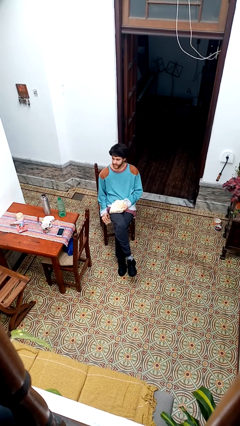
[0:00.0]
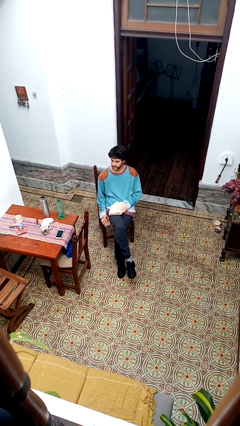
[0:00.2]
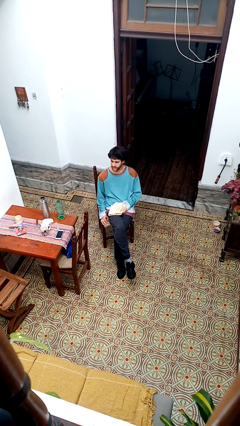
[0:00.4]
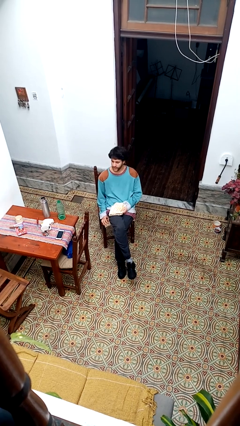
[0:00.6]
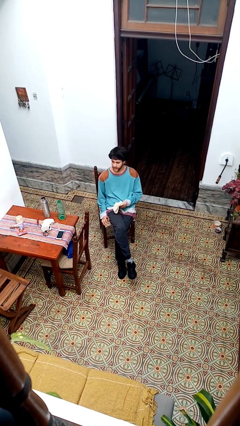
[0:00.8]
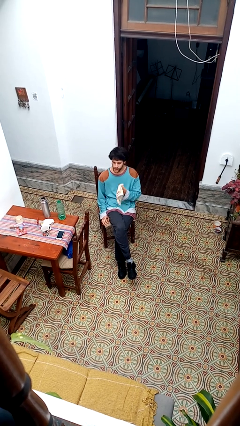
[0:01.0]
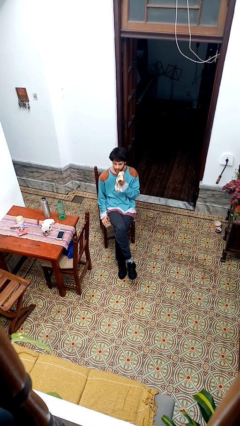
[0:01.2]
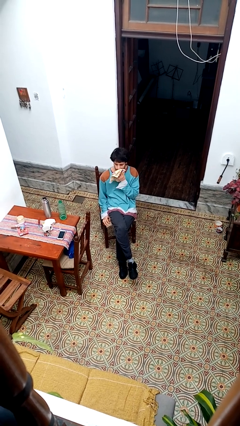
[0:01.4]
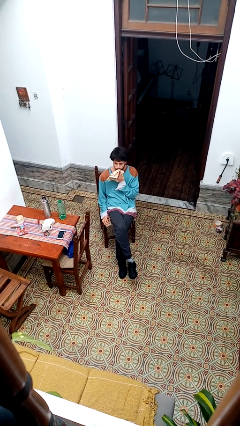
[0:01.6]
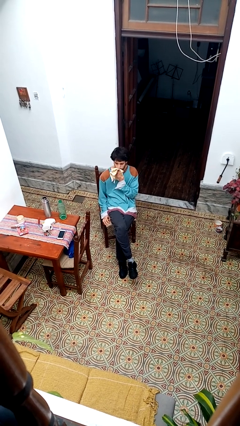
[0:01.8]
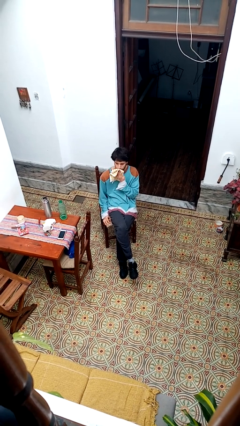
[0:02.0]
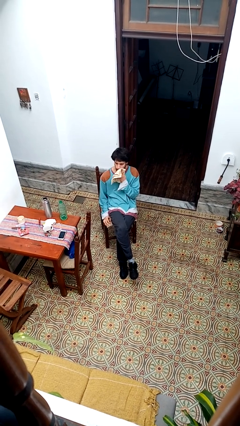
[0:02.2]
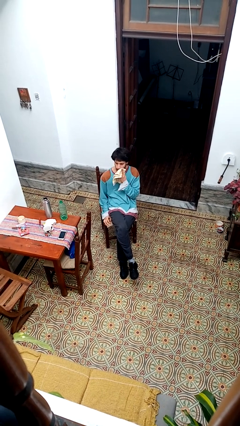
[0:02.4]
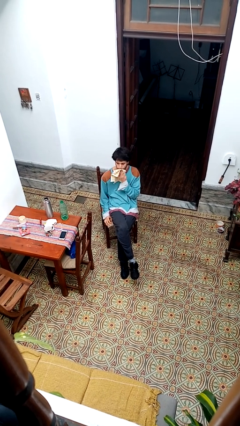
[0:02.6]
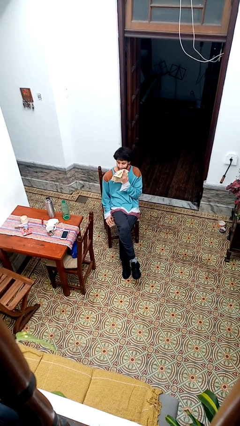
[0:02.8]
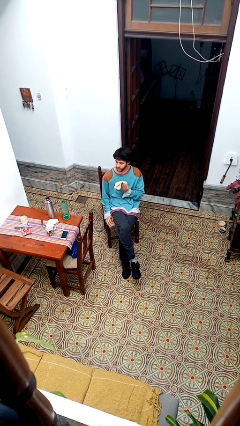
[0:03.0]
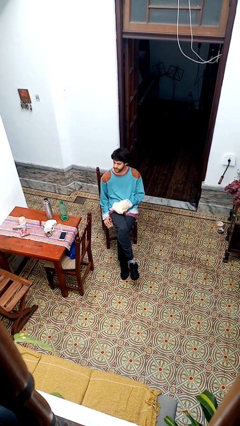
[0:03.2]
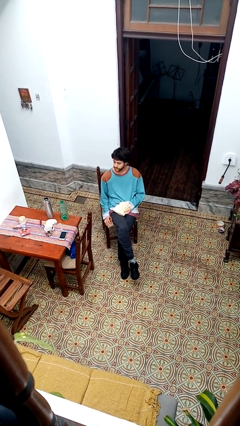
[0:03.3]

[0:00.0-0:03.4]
person wipes mouth with napkin

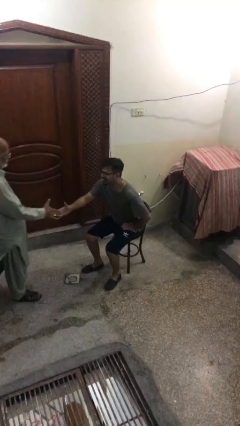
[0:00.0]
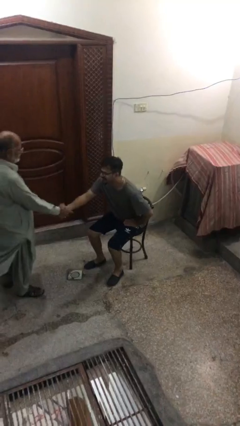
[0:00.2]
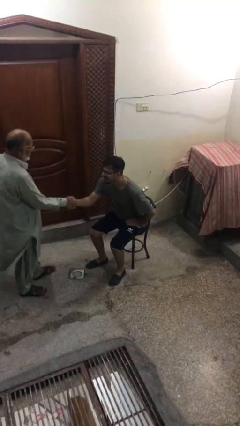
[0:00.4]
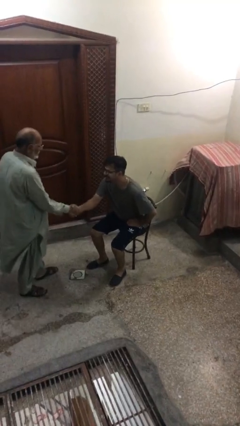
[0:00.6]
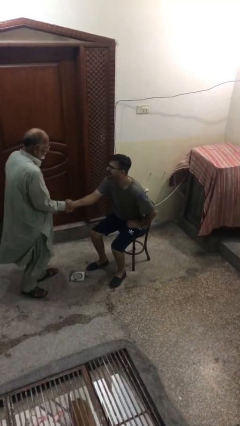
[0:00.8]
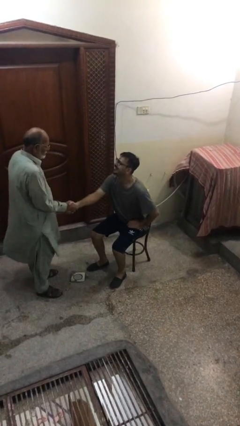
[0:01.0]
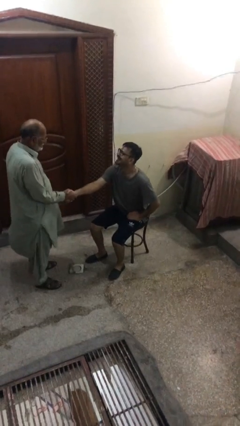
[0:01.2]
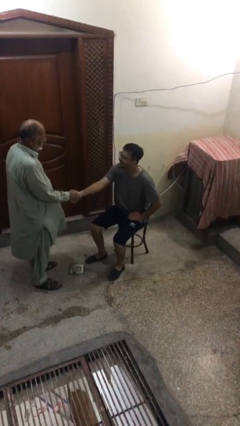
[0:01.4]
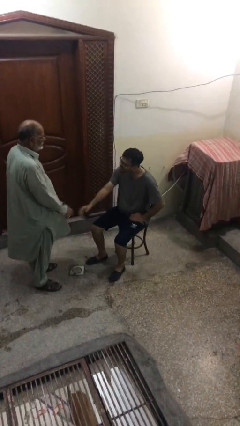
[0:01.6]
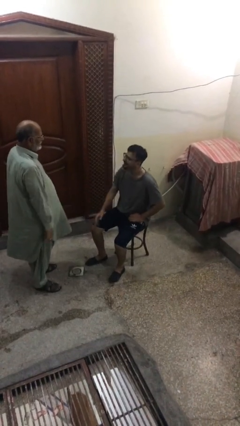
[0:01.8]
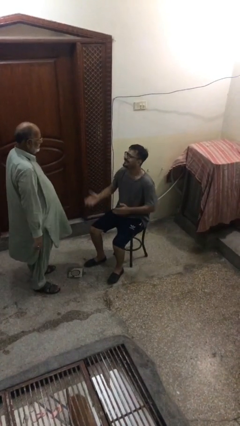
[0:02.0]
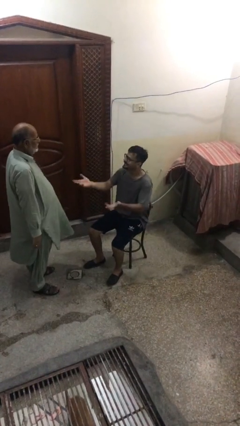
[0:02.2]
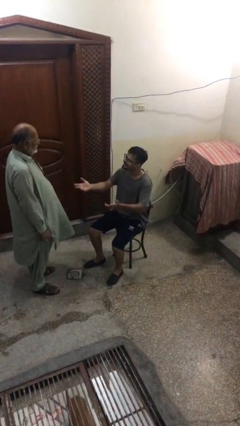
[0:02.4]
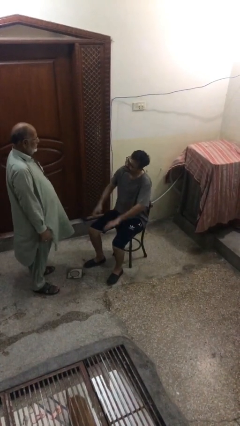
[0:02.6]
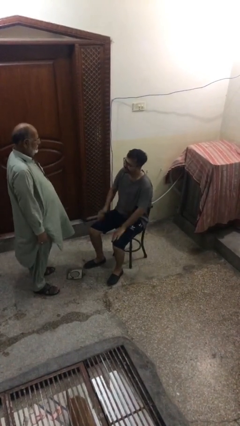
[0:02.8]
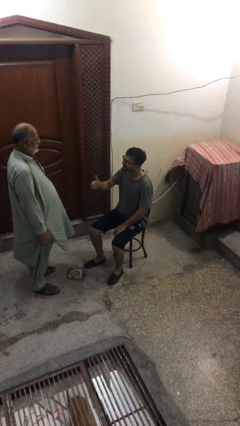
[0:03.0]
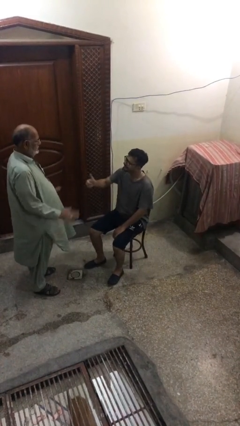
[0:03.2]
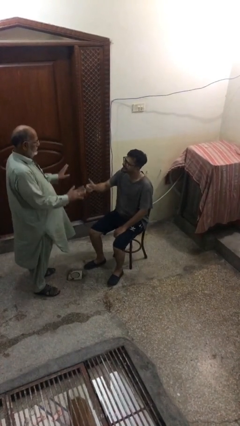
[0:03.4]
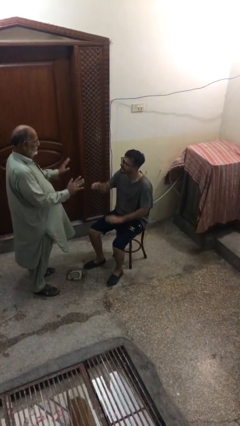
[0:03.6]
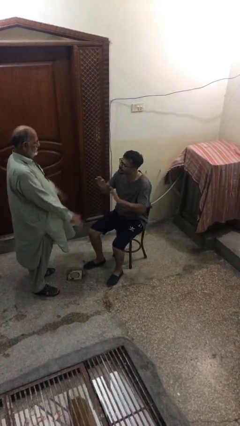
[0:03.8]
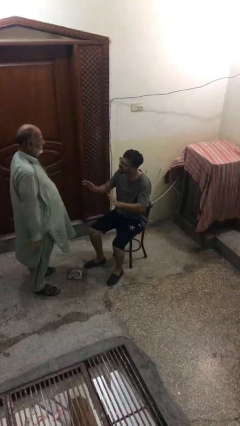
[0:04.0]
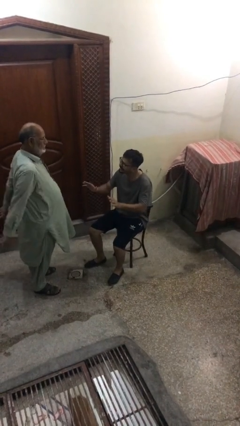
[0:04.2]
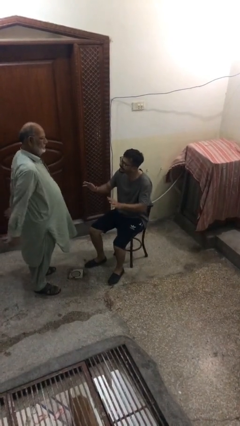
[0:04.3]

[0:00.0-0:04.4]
person shakes hand

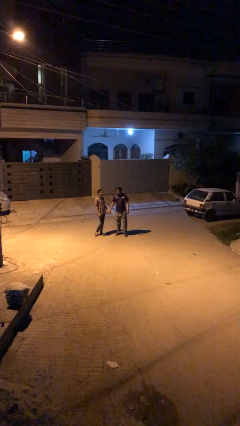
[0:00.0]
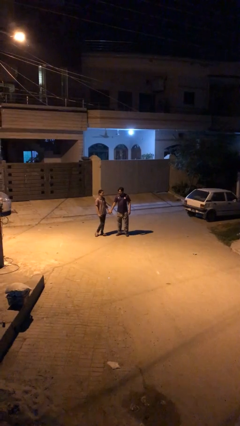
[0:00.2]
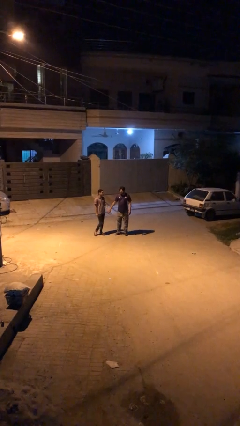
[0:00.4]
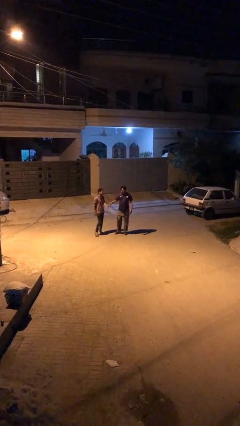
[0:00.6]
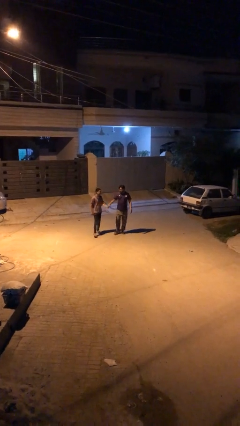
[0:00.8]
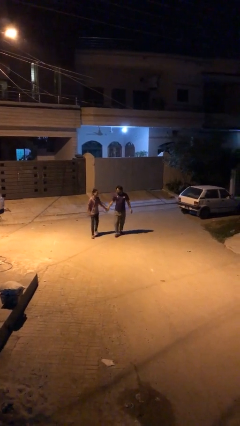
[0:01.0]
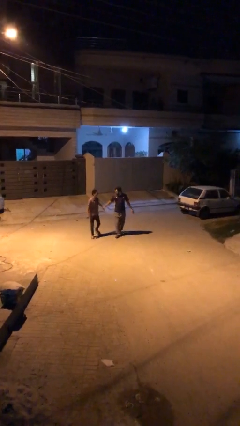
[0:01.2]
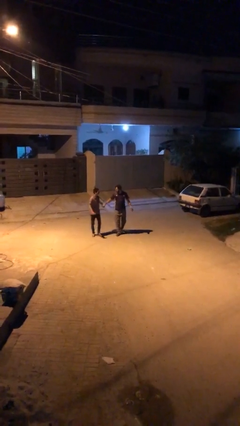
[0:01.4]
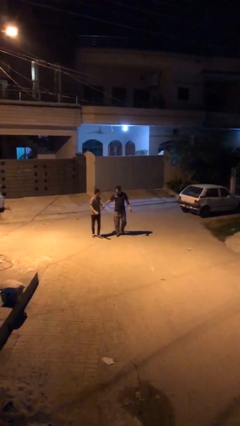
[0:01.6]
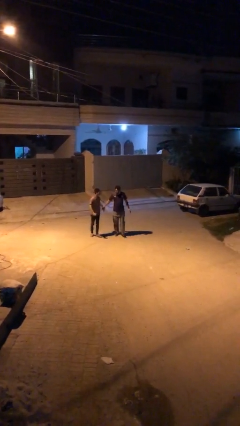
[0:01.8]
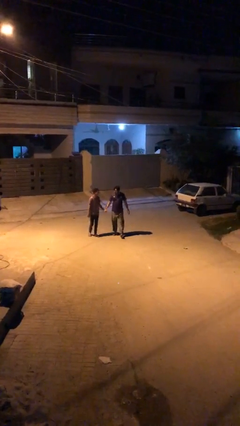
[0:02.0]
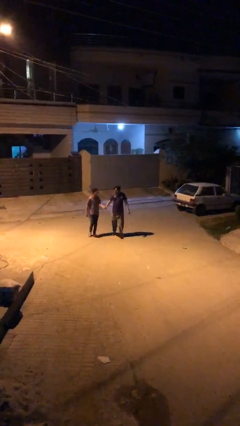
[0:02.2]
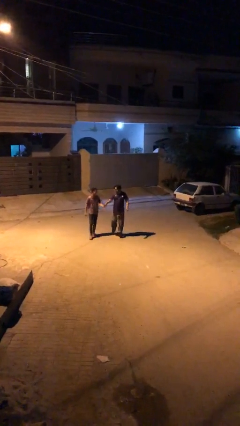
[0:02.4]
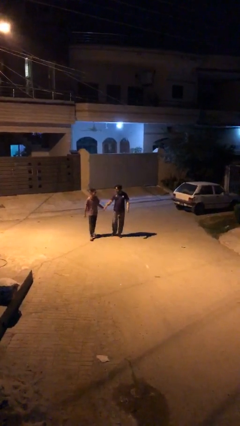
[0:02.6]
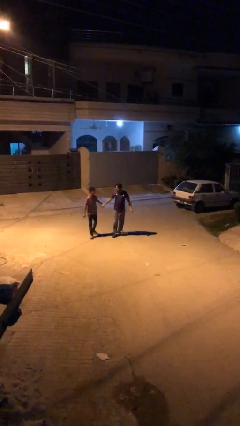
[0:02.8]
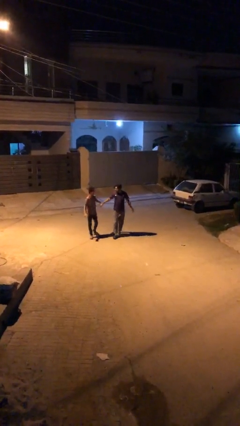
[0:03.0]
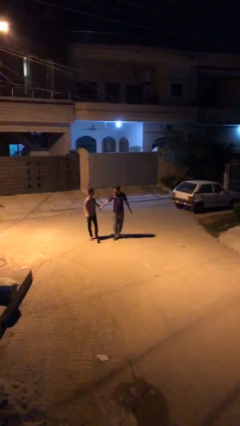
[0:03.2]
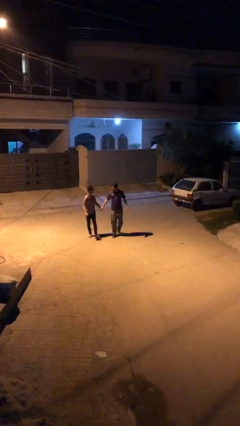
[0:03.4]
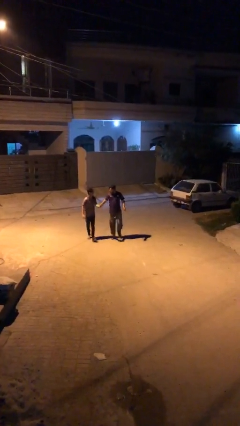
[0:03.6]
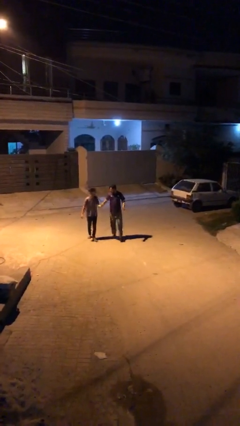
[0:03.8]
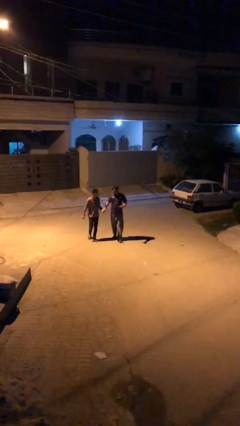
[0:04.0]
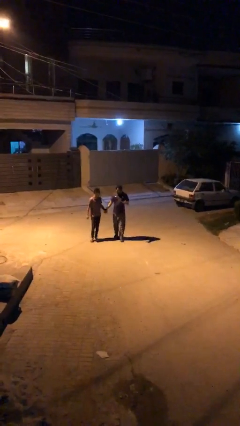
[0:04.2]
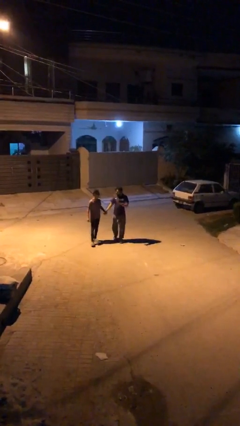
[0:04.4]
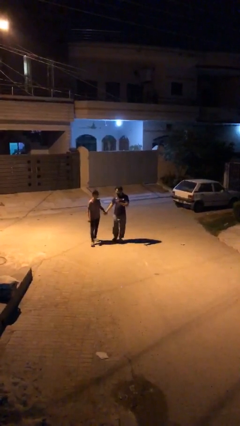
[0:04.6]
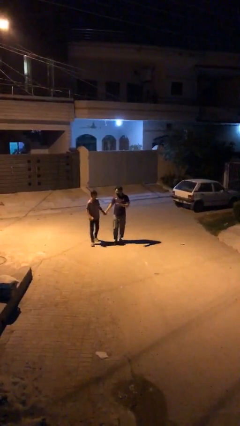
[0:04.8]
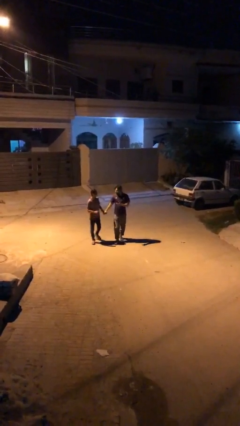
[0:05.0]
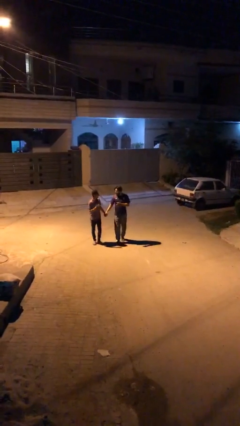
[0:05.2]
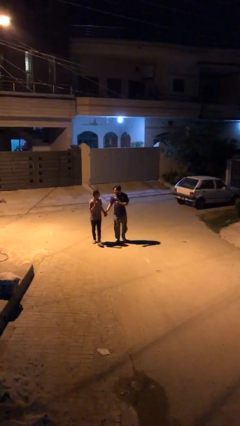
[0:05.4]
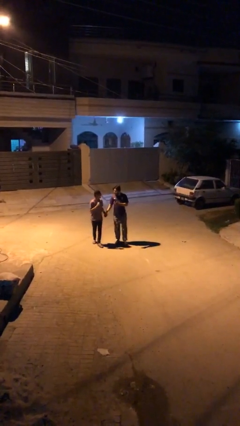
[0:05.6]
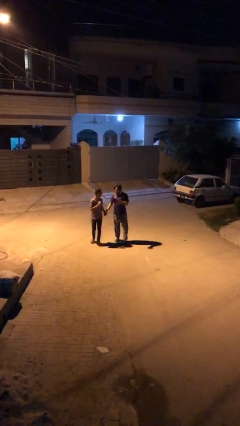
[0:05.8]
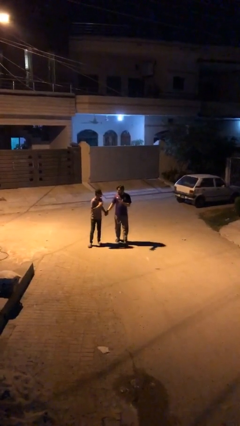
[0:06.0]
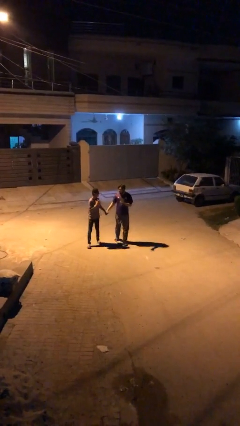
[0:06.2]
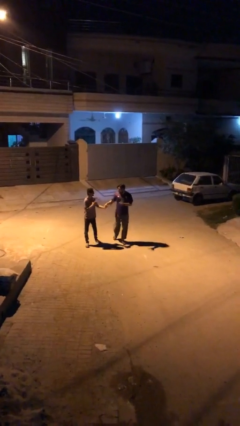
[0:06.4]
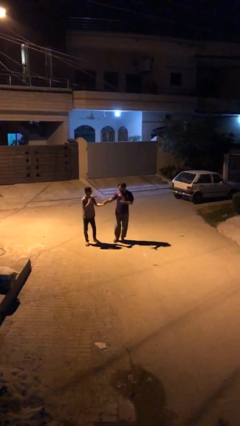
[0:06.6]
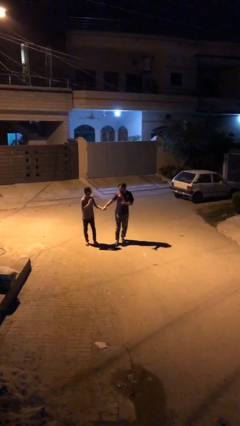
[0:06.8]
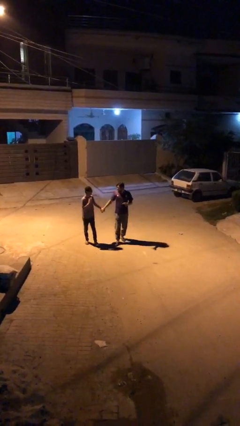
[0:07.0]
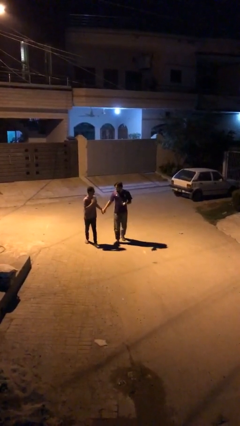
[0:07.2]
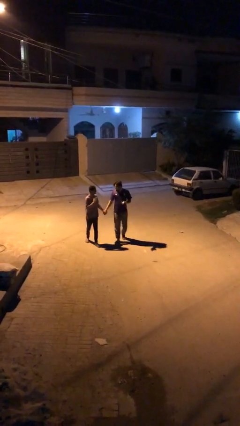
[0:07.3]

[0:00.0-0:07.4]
person holds hand

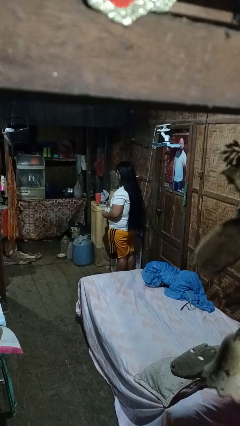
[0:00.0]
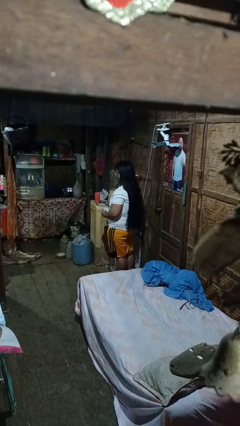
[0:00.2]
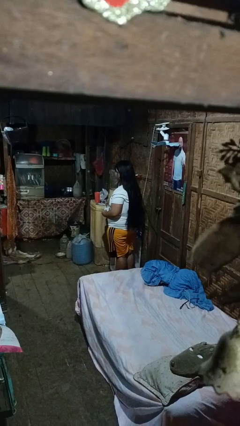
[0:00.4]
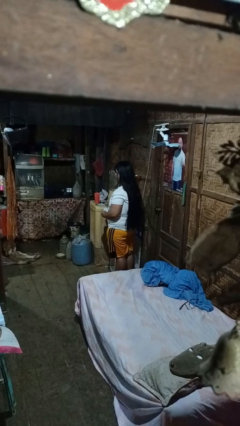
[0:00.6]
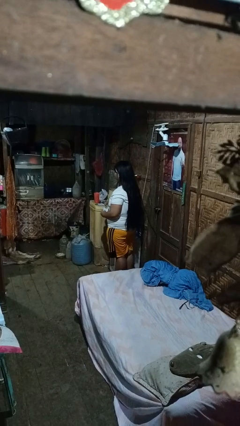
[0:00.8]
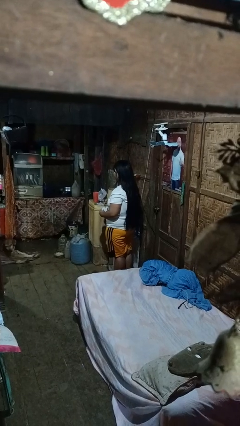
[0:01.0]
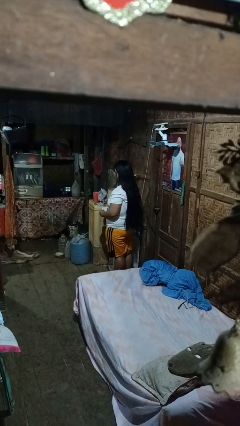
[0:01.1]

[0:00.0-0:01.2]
person stirs mug

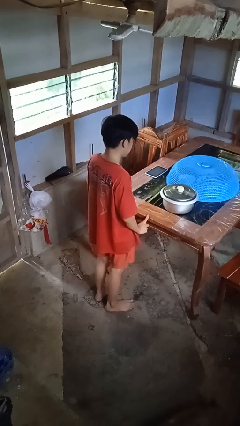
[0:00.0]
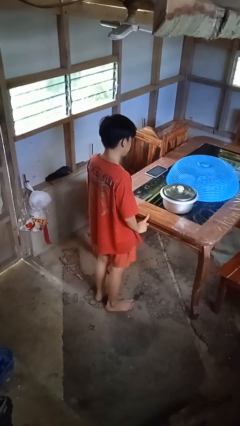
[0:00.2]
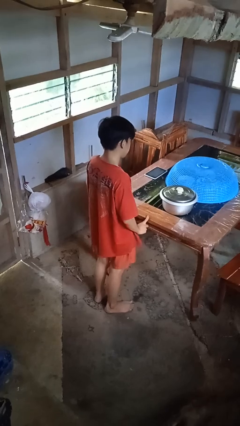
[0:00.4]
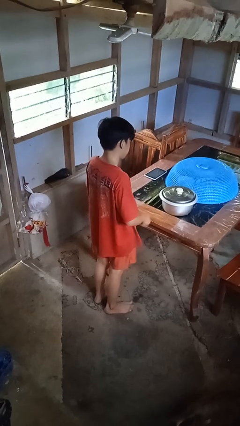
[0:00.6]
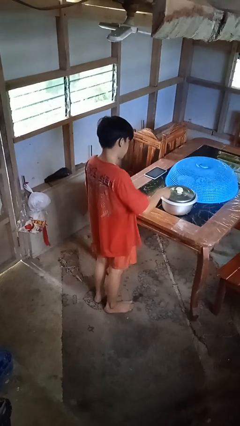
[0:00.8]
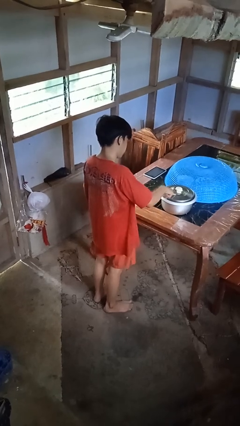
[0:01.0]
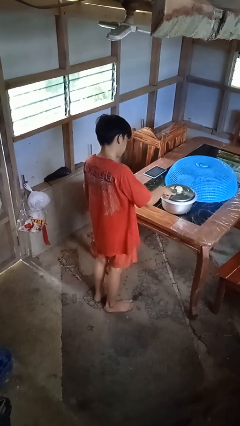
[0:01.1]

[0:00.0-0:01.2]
person taps object with finger
